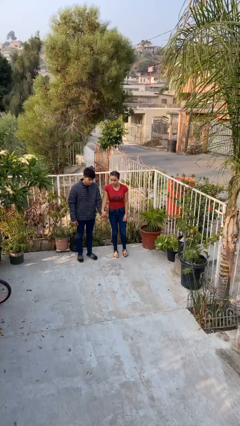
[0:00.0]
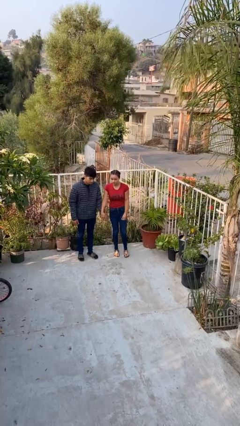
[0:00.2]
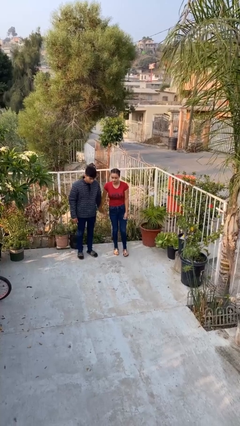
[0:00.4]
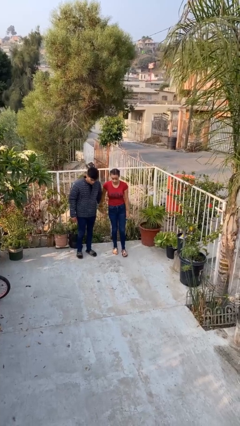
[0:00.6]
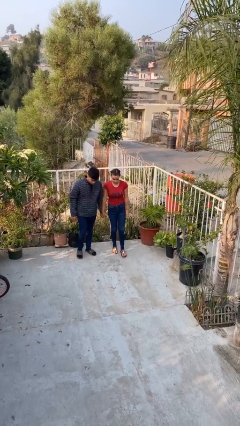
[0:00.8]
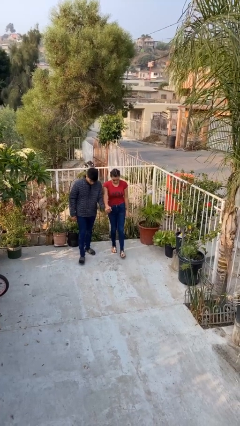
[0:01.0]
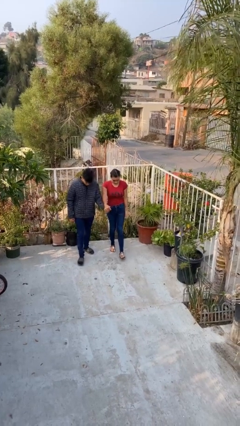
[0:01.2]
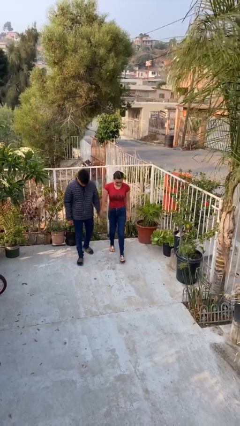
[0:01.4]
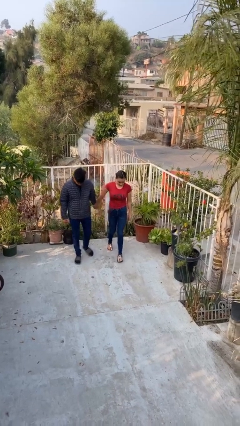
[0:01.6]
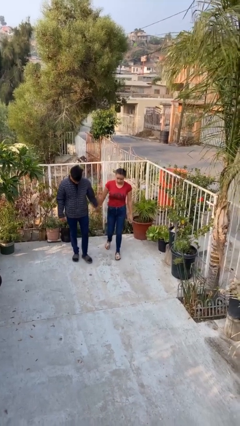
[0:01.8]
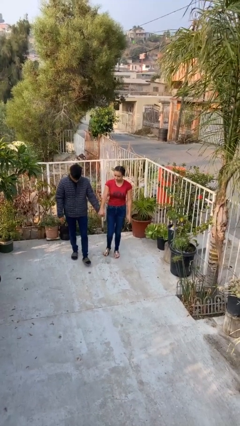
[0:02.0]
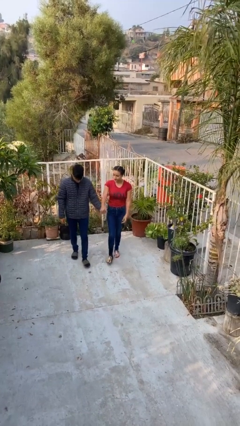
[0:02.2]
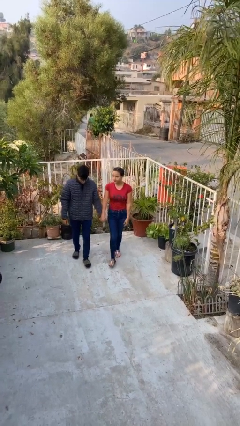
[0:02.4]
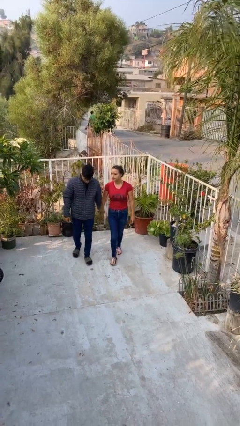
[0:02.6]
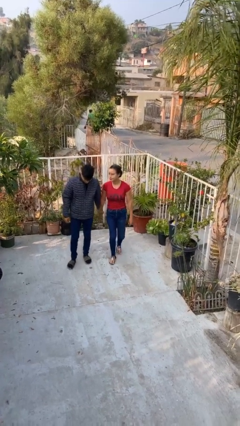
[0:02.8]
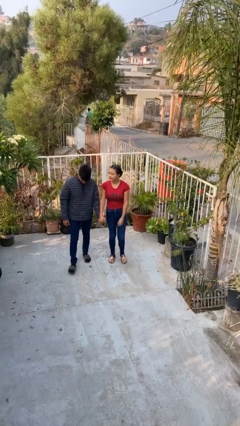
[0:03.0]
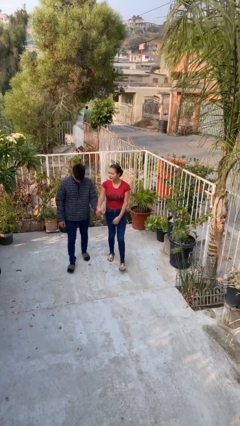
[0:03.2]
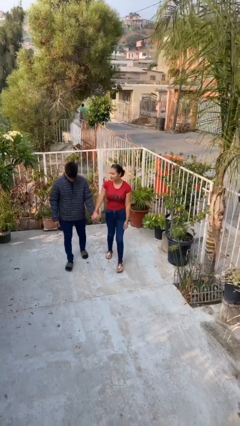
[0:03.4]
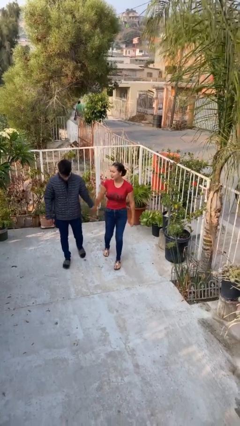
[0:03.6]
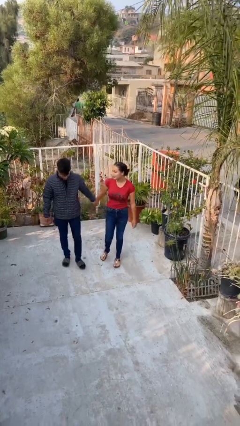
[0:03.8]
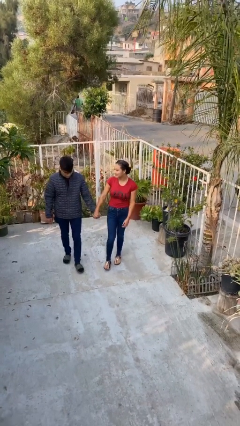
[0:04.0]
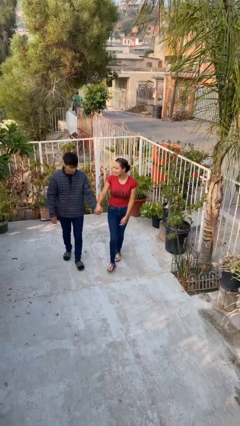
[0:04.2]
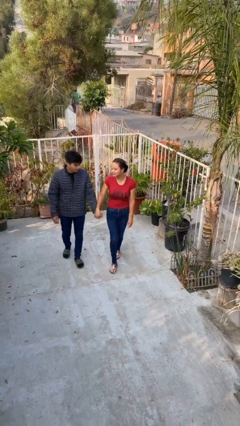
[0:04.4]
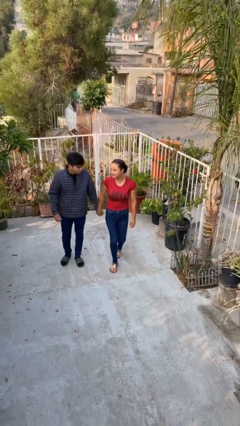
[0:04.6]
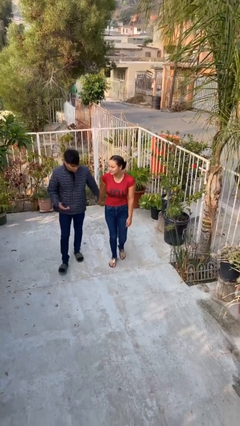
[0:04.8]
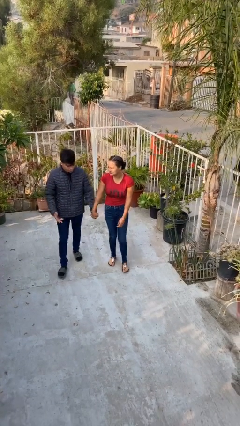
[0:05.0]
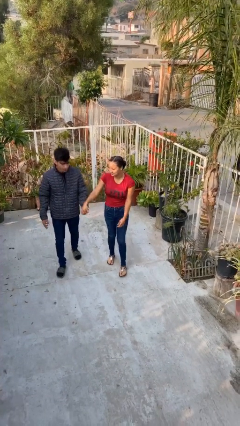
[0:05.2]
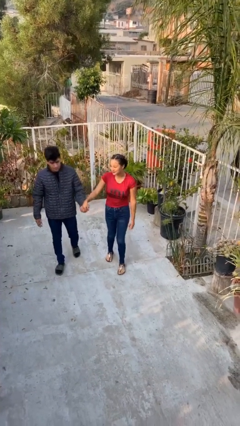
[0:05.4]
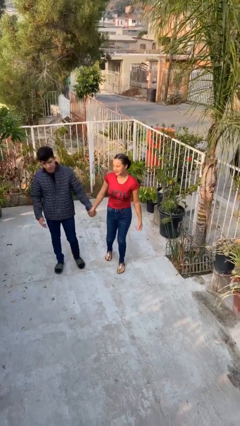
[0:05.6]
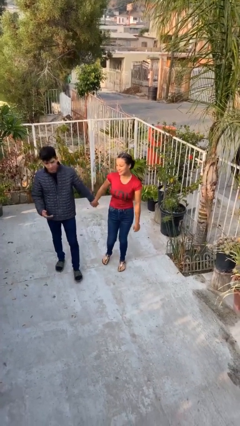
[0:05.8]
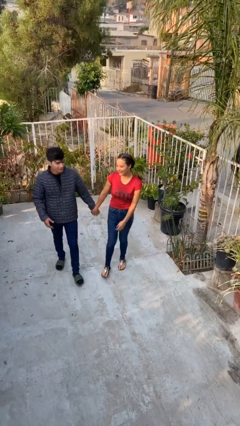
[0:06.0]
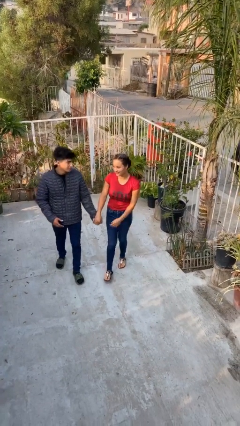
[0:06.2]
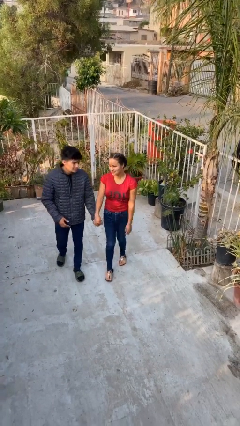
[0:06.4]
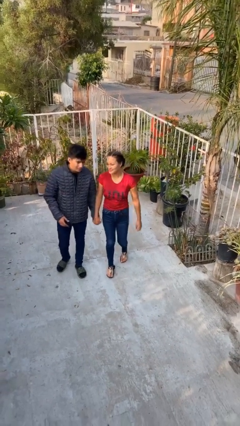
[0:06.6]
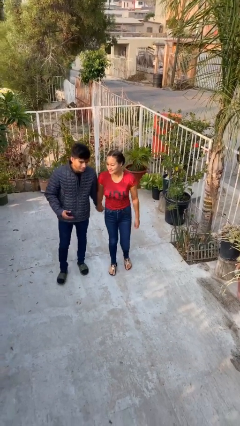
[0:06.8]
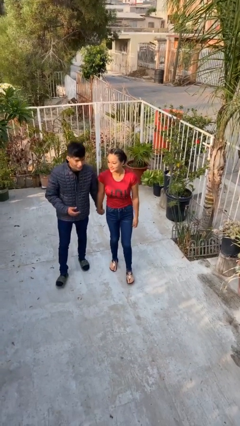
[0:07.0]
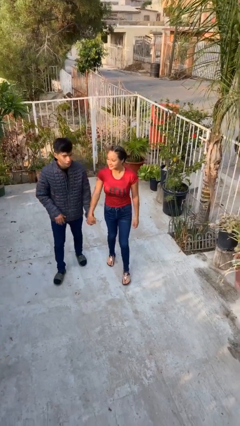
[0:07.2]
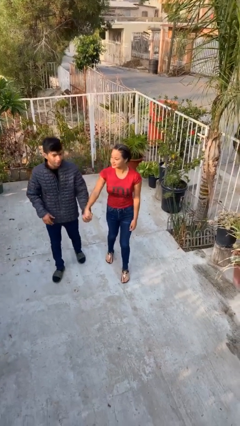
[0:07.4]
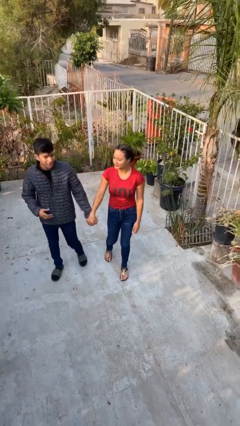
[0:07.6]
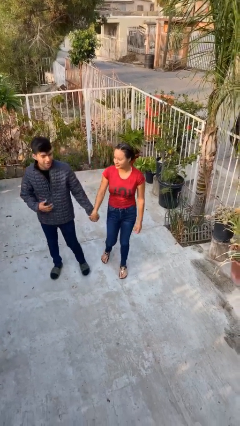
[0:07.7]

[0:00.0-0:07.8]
person holds hand

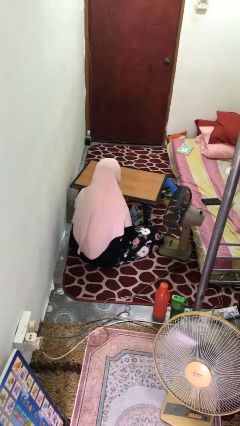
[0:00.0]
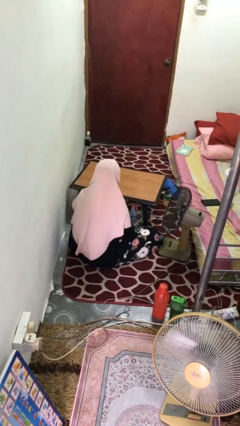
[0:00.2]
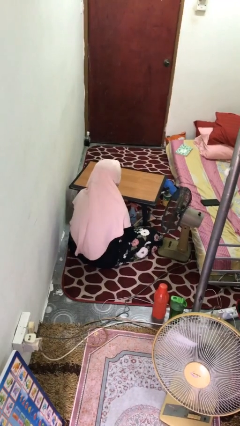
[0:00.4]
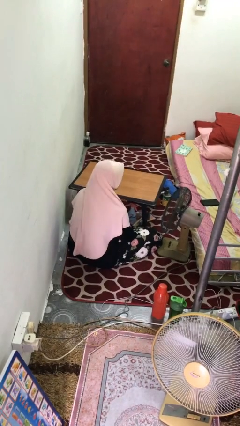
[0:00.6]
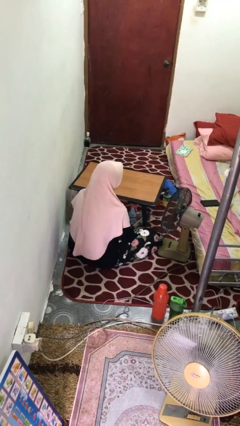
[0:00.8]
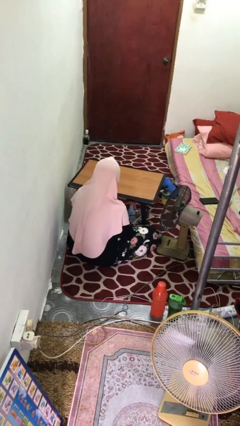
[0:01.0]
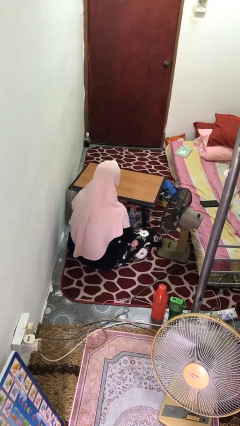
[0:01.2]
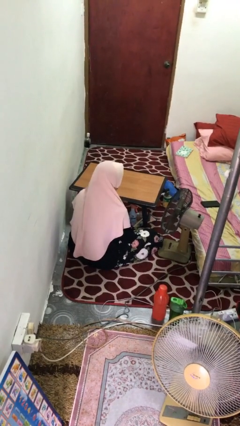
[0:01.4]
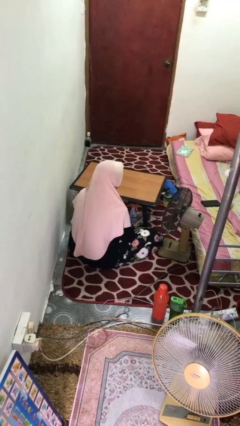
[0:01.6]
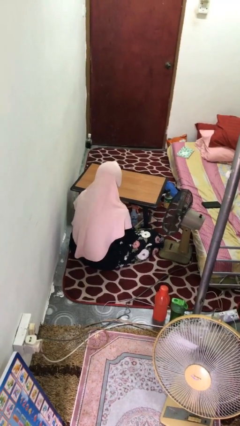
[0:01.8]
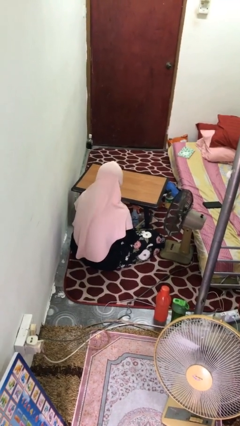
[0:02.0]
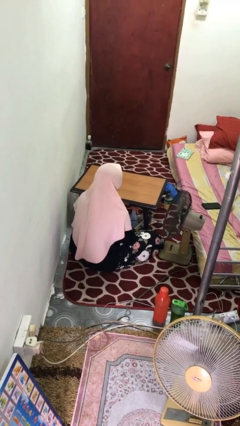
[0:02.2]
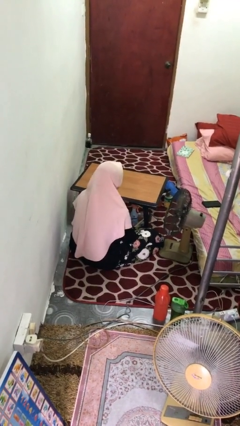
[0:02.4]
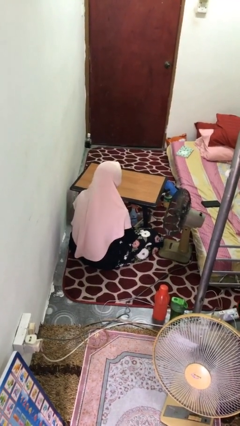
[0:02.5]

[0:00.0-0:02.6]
person shakes head

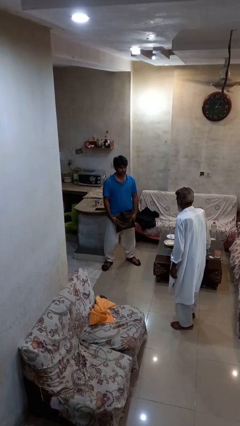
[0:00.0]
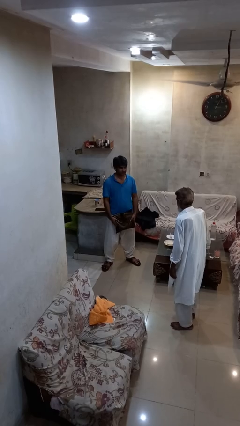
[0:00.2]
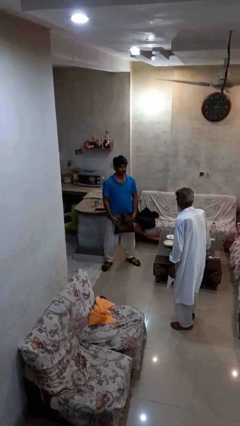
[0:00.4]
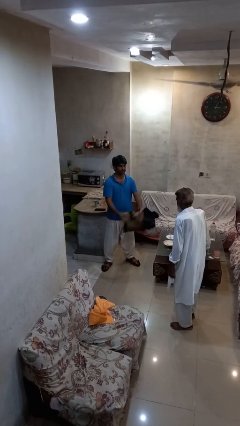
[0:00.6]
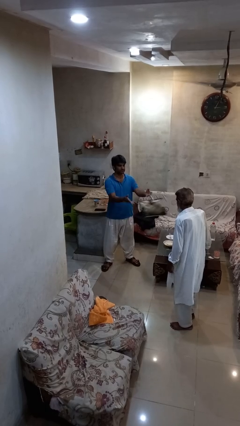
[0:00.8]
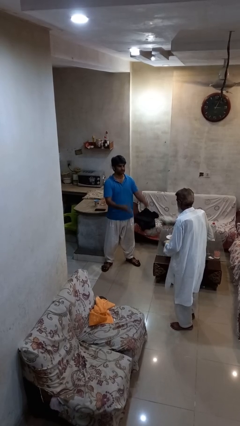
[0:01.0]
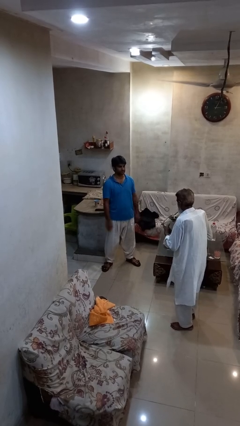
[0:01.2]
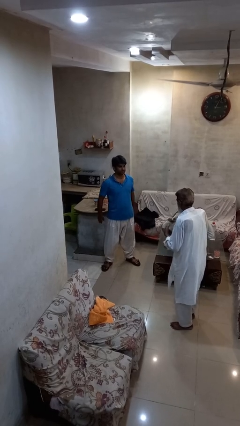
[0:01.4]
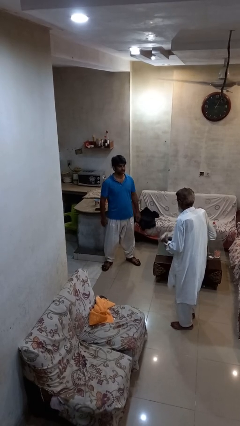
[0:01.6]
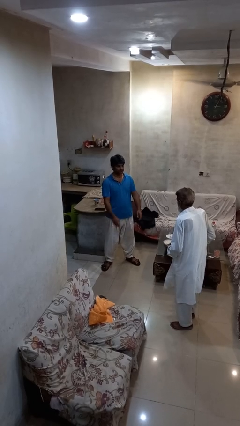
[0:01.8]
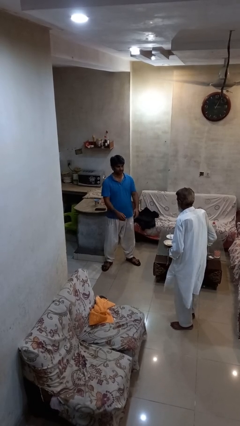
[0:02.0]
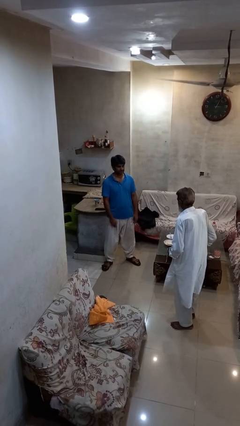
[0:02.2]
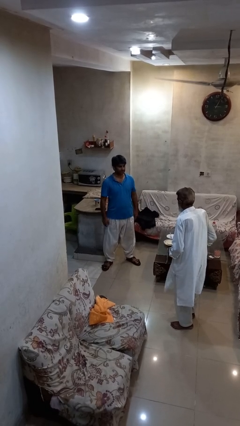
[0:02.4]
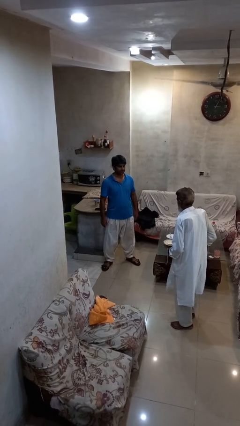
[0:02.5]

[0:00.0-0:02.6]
person throws object to person

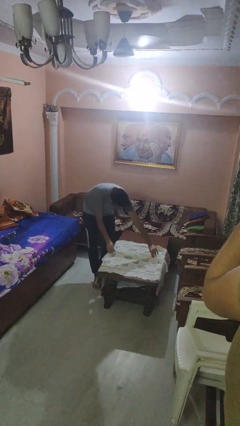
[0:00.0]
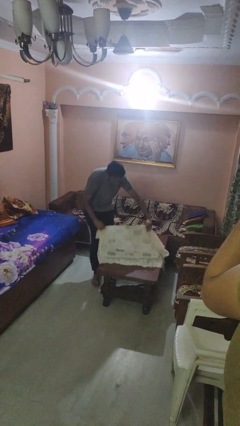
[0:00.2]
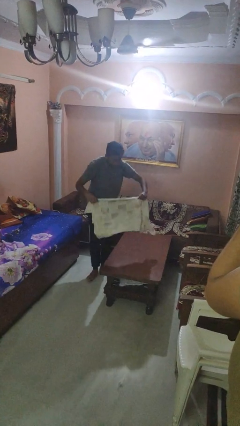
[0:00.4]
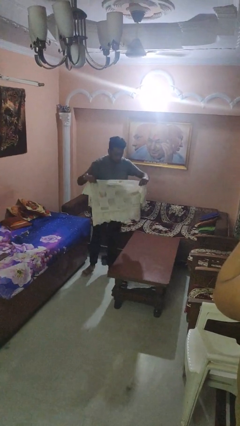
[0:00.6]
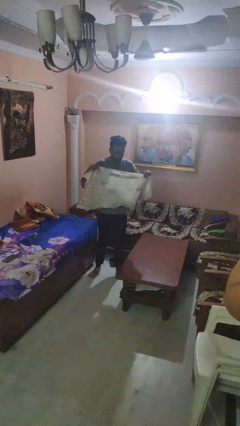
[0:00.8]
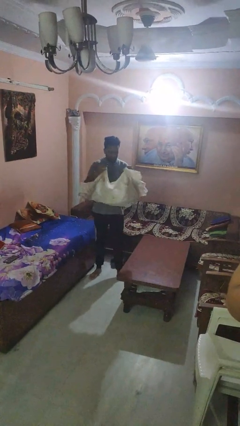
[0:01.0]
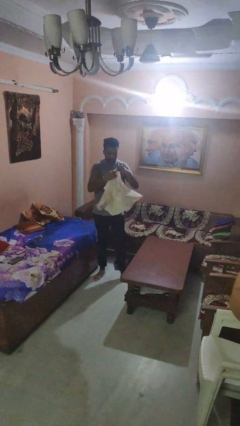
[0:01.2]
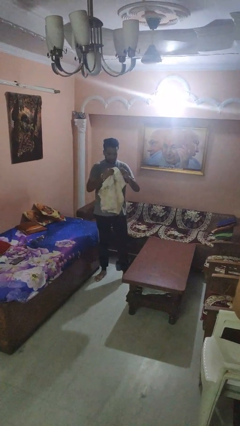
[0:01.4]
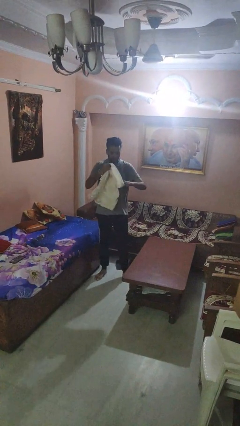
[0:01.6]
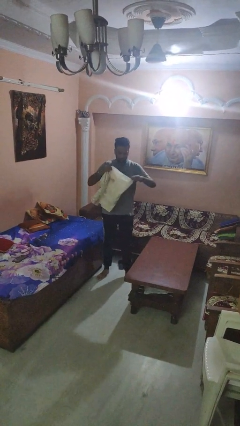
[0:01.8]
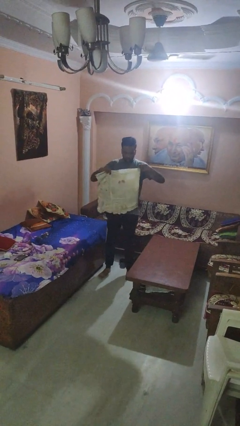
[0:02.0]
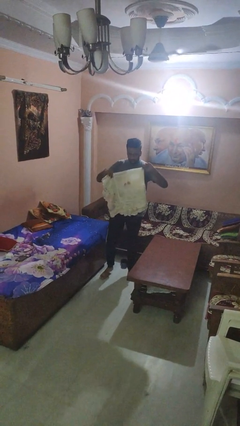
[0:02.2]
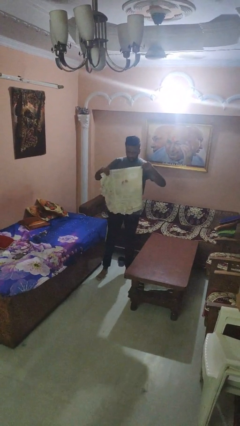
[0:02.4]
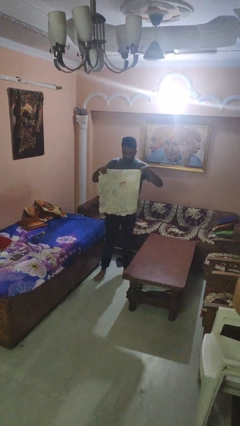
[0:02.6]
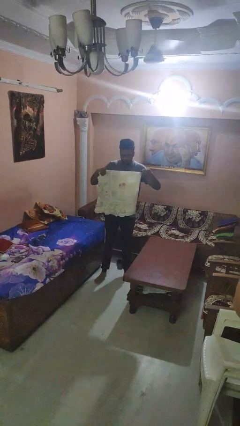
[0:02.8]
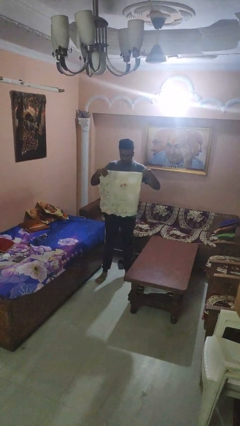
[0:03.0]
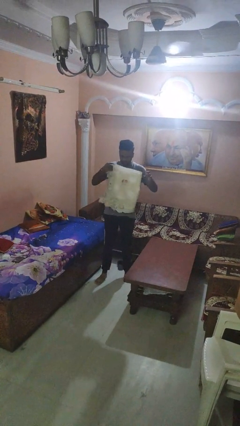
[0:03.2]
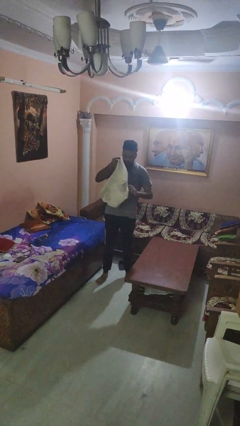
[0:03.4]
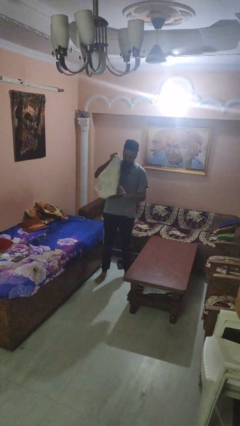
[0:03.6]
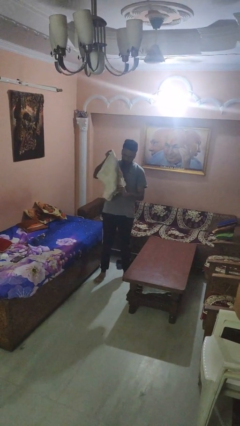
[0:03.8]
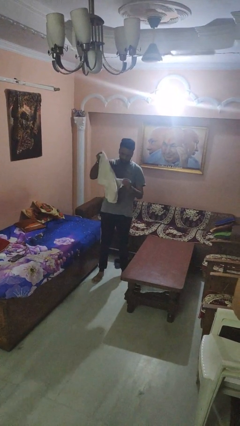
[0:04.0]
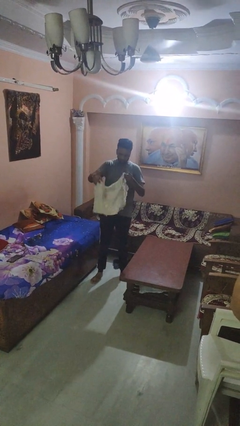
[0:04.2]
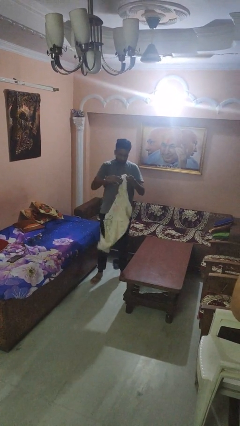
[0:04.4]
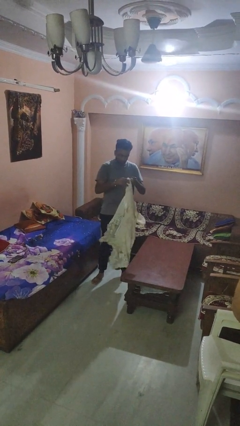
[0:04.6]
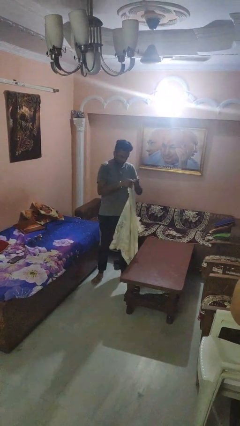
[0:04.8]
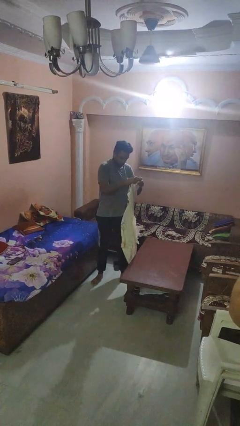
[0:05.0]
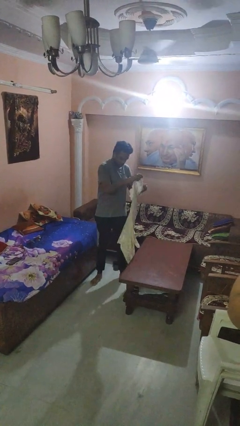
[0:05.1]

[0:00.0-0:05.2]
person folds tablecloth
